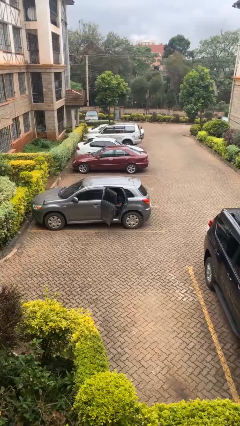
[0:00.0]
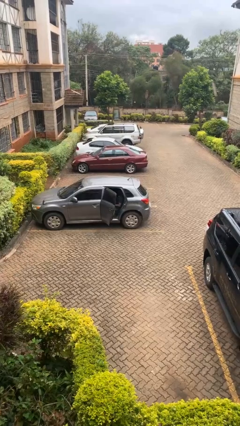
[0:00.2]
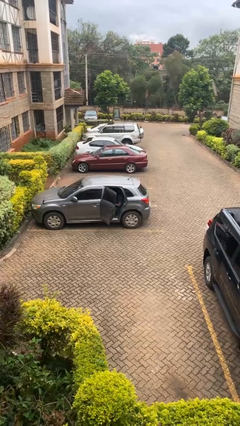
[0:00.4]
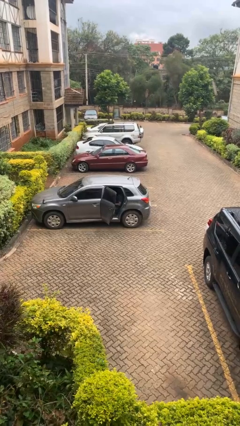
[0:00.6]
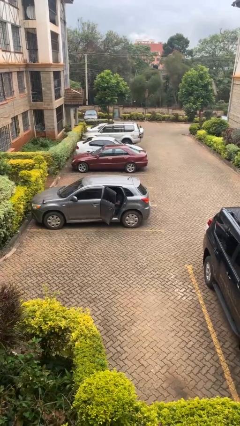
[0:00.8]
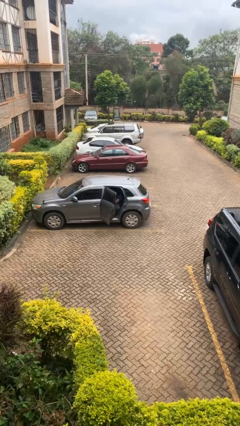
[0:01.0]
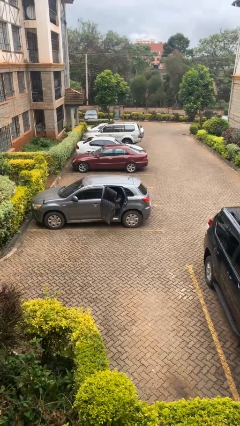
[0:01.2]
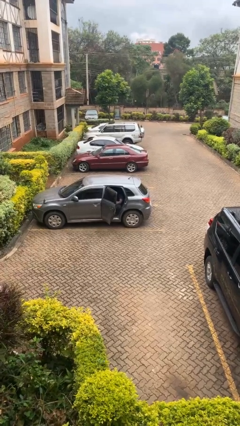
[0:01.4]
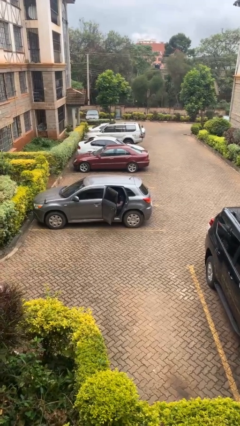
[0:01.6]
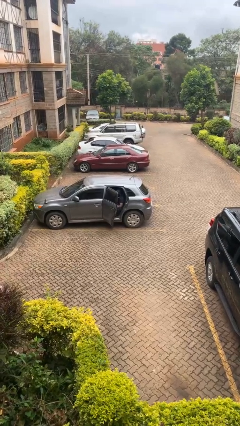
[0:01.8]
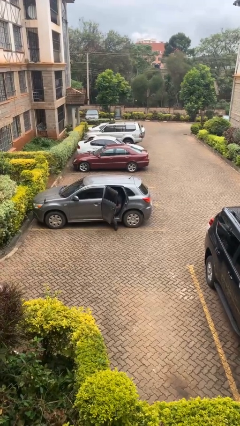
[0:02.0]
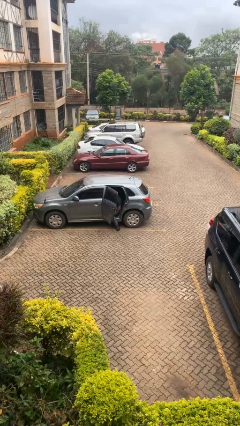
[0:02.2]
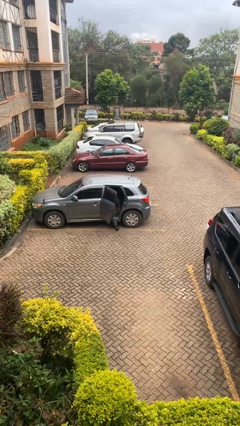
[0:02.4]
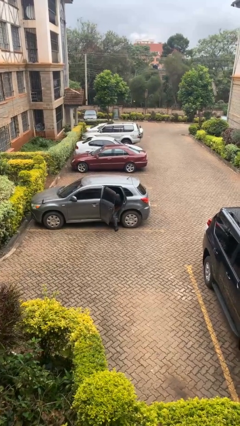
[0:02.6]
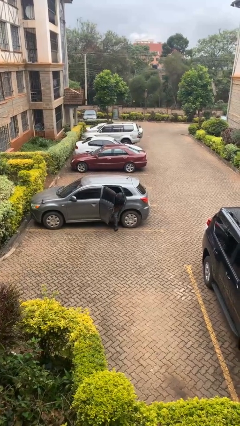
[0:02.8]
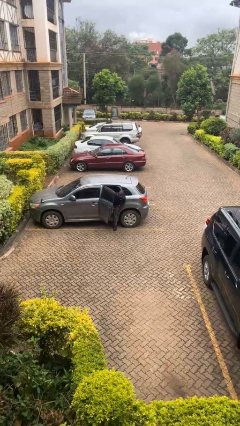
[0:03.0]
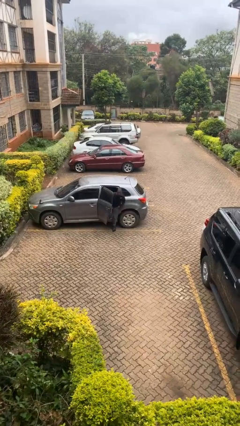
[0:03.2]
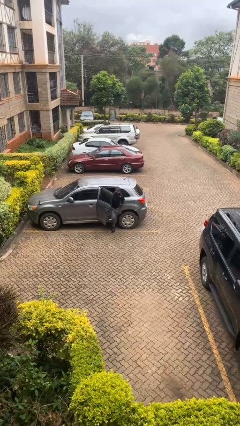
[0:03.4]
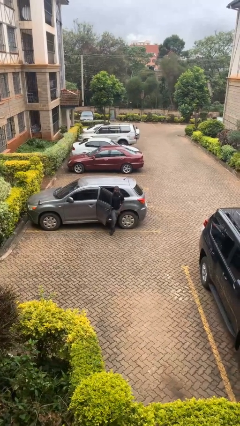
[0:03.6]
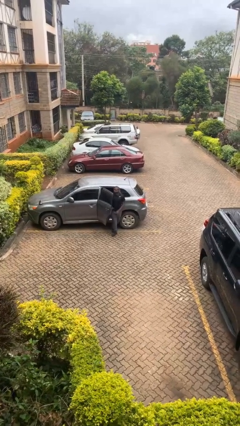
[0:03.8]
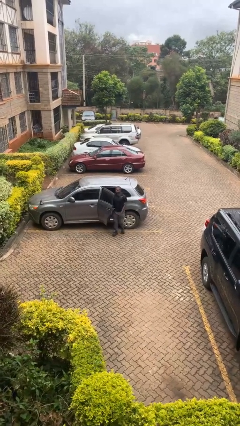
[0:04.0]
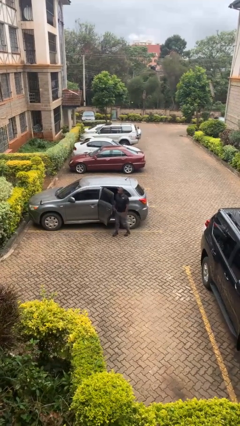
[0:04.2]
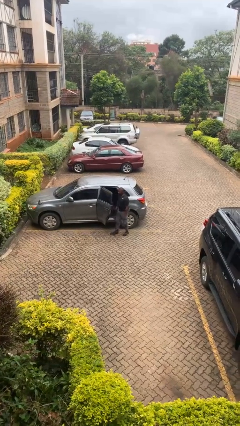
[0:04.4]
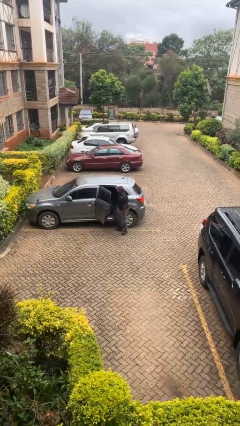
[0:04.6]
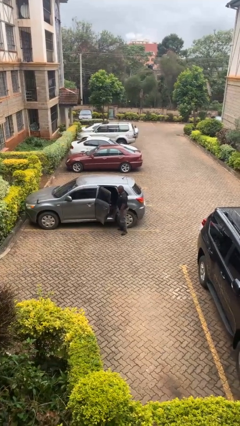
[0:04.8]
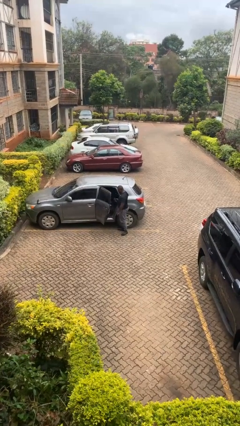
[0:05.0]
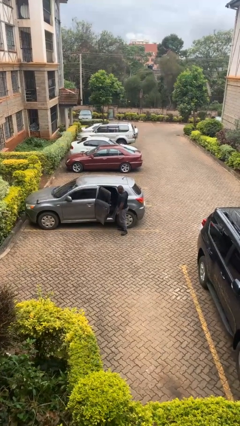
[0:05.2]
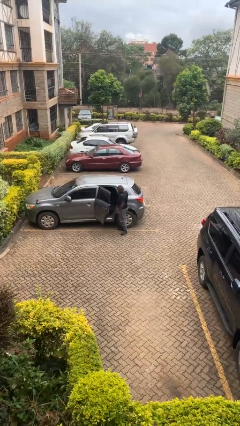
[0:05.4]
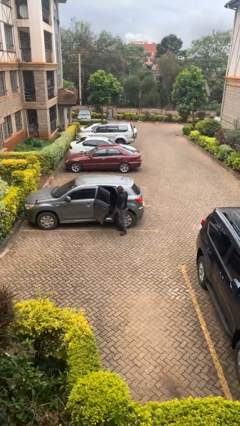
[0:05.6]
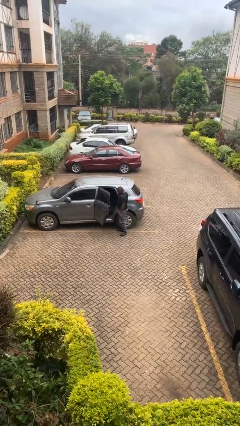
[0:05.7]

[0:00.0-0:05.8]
person exits car

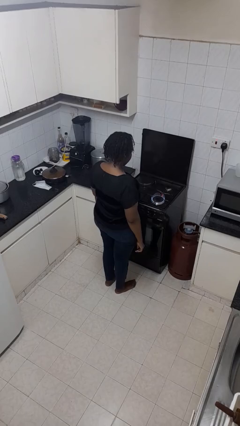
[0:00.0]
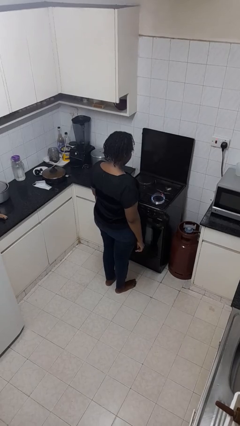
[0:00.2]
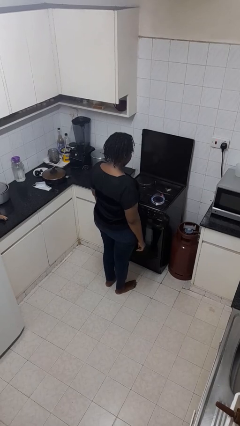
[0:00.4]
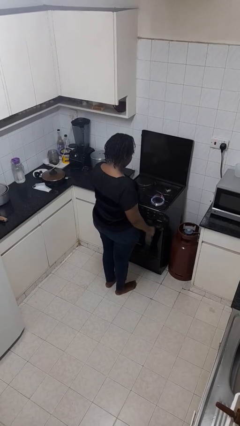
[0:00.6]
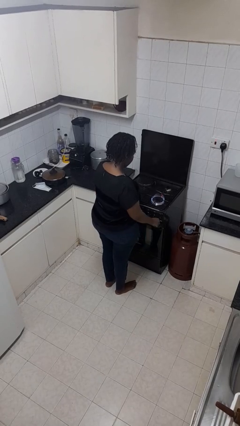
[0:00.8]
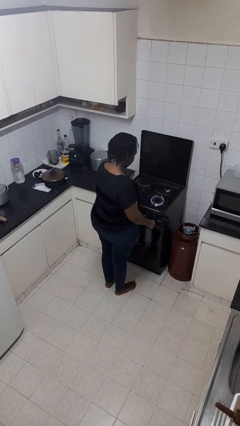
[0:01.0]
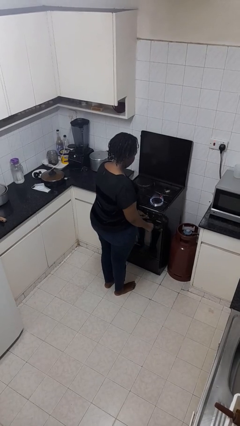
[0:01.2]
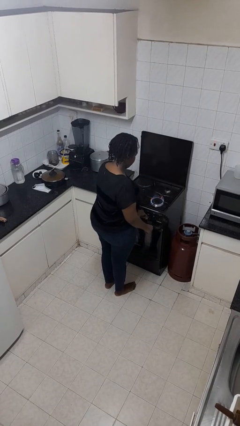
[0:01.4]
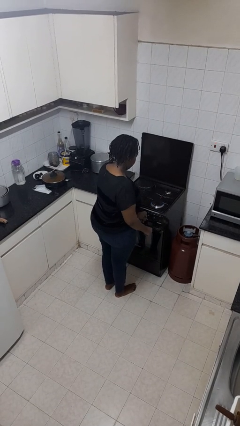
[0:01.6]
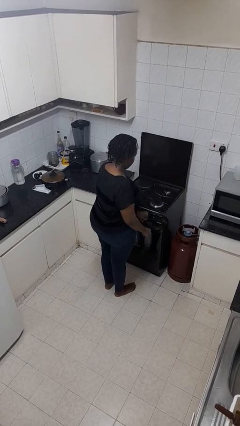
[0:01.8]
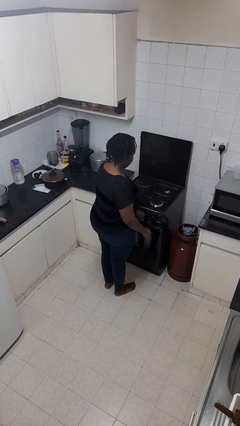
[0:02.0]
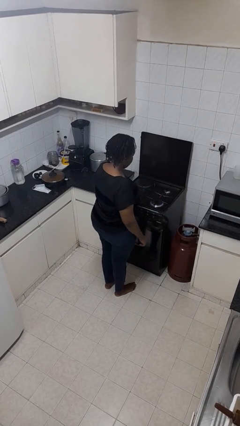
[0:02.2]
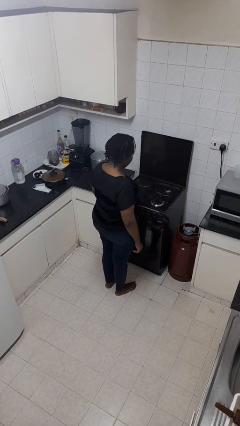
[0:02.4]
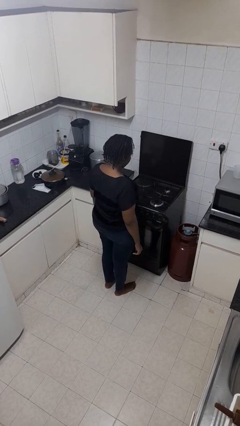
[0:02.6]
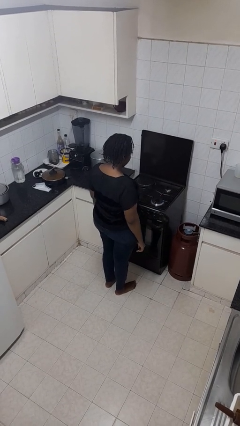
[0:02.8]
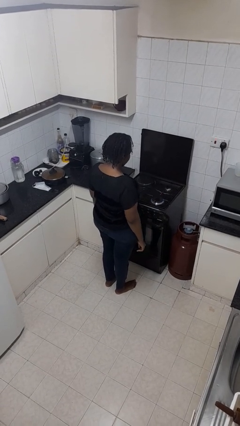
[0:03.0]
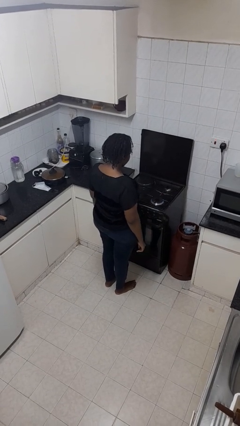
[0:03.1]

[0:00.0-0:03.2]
person turns off stovetop

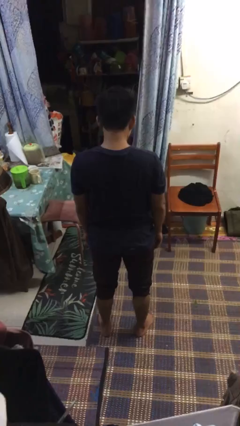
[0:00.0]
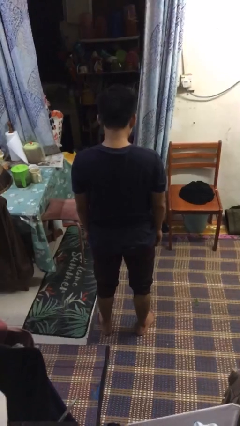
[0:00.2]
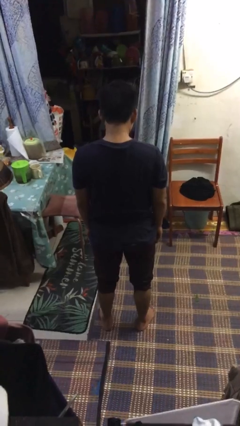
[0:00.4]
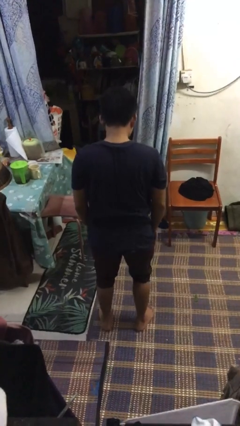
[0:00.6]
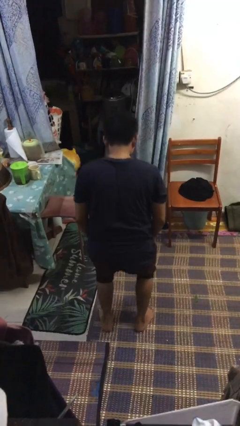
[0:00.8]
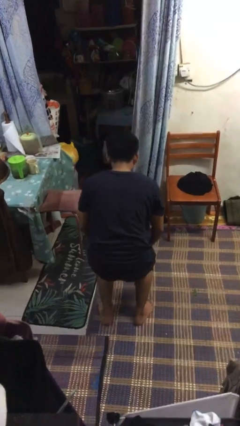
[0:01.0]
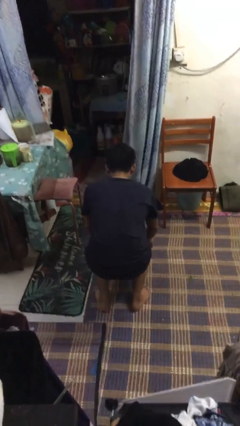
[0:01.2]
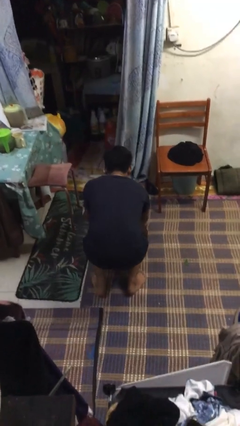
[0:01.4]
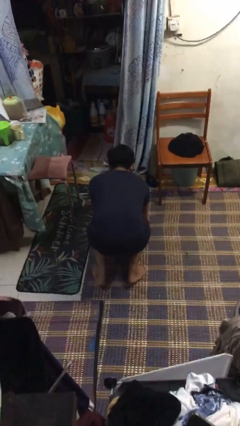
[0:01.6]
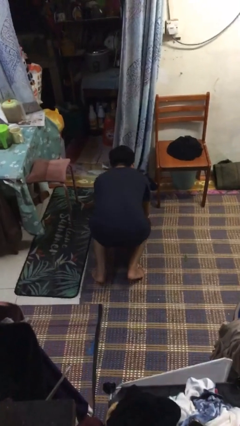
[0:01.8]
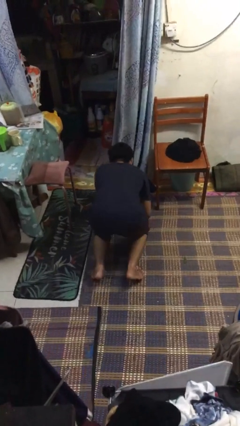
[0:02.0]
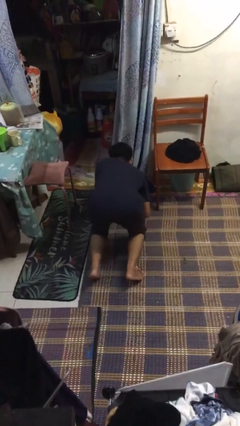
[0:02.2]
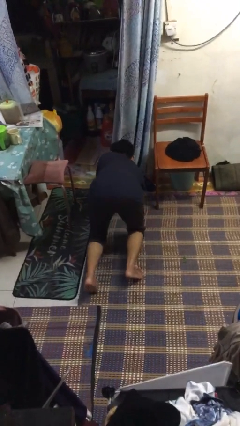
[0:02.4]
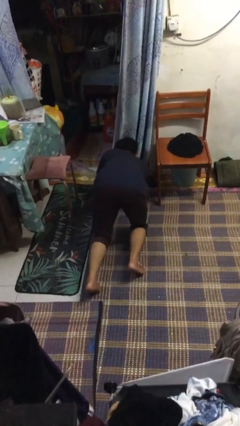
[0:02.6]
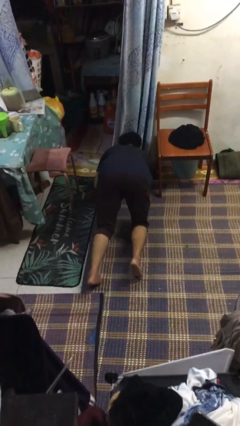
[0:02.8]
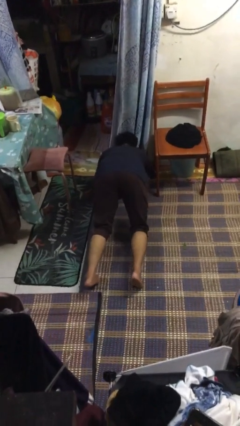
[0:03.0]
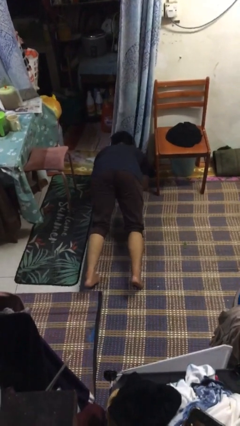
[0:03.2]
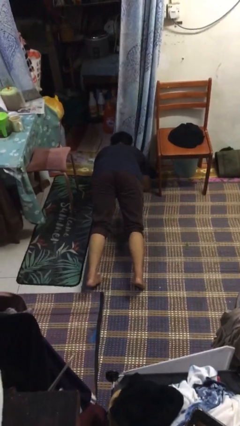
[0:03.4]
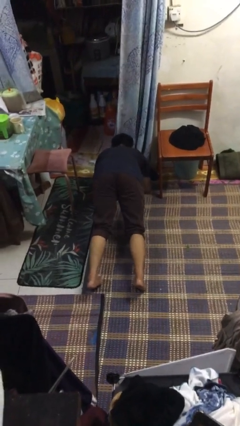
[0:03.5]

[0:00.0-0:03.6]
person exercises with plank

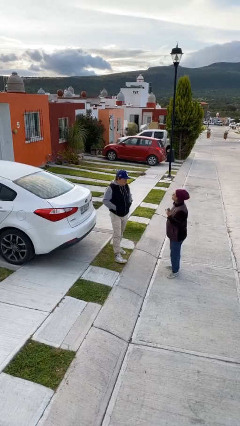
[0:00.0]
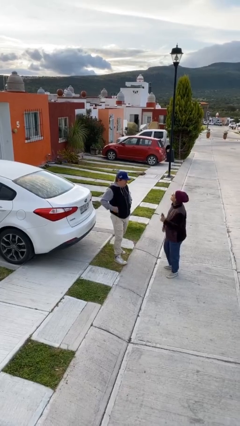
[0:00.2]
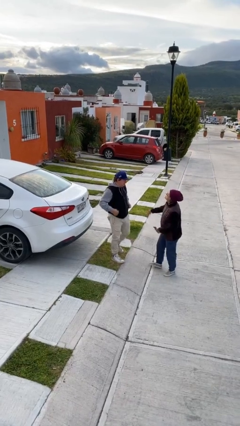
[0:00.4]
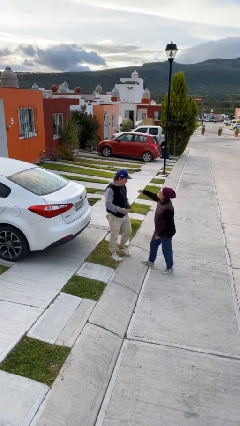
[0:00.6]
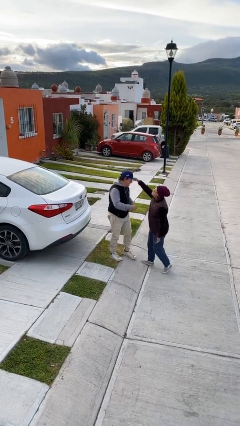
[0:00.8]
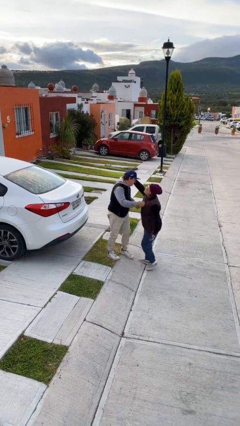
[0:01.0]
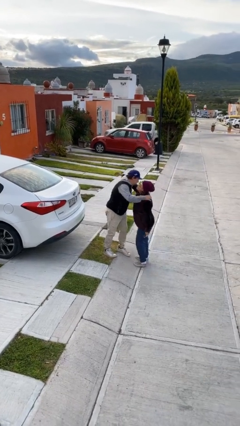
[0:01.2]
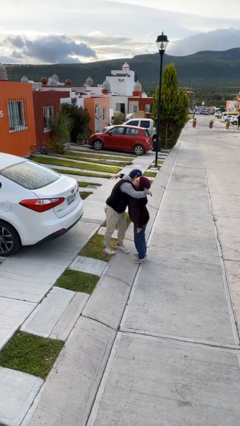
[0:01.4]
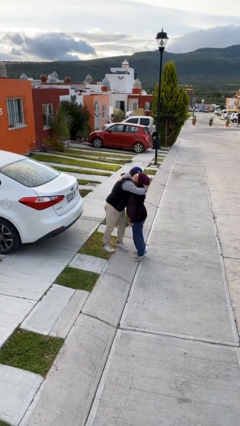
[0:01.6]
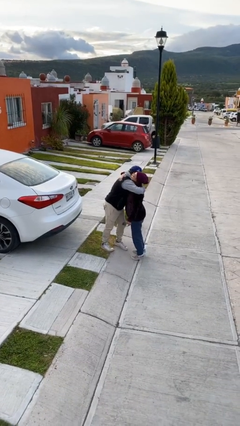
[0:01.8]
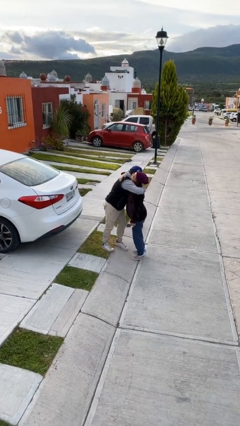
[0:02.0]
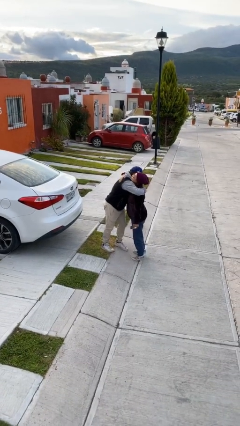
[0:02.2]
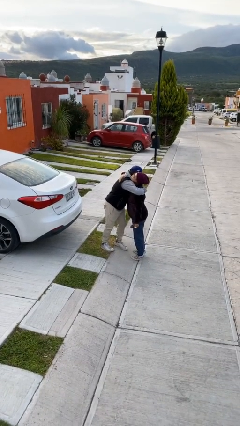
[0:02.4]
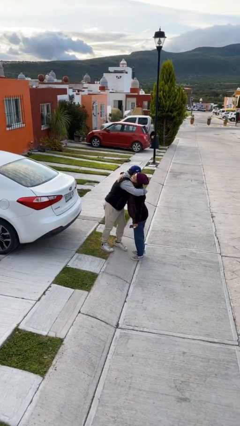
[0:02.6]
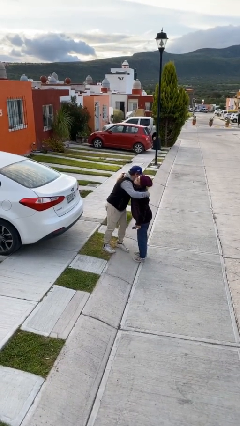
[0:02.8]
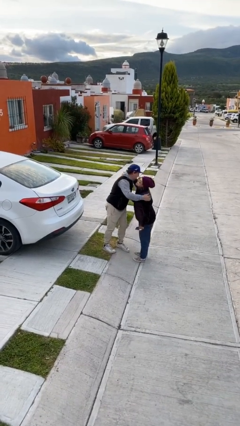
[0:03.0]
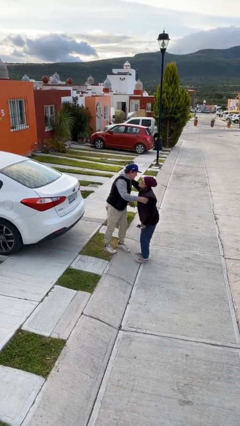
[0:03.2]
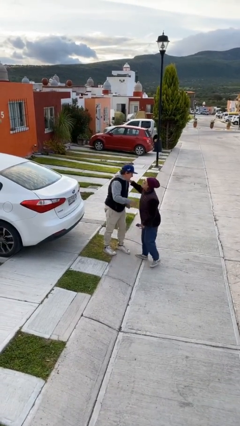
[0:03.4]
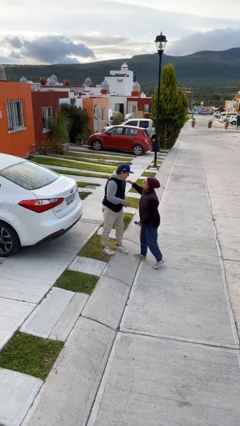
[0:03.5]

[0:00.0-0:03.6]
person embraces person

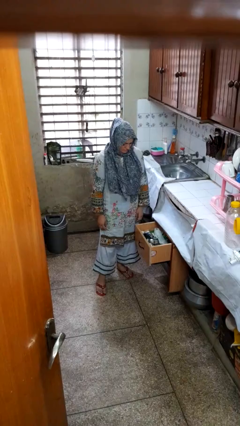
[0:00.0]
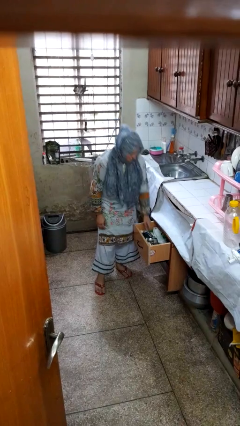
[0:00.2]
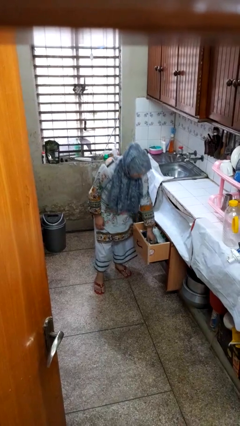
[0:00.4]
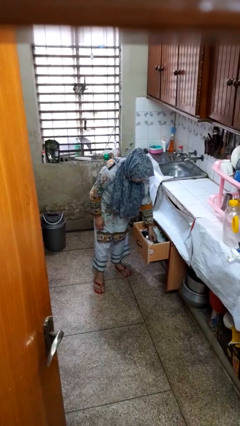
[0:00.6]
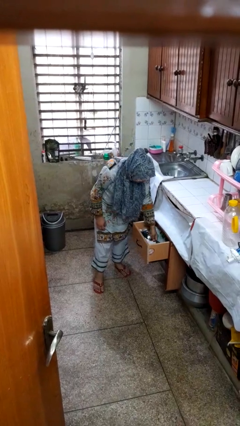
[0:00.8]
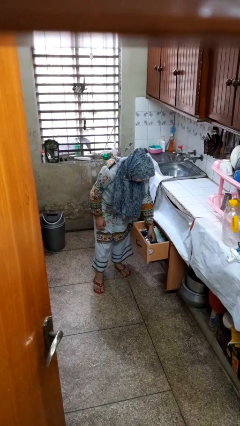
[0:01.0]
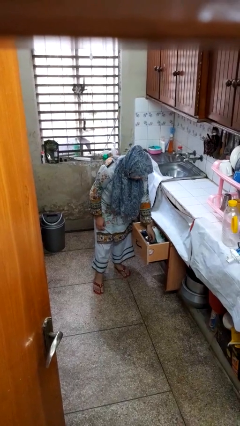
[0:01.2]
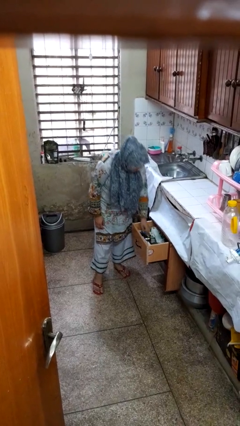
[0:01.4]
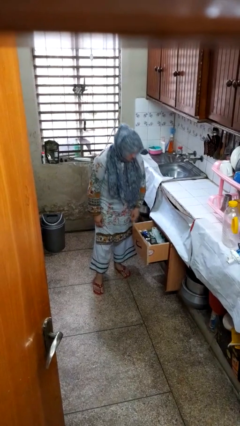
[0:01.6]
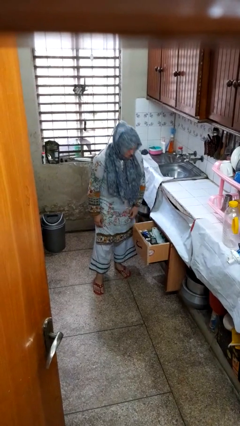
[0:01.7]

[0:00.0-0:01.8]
person searches in kitchen drawer
